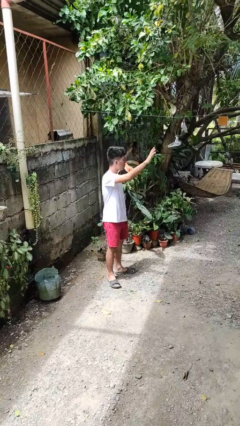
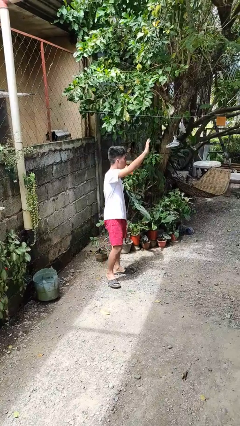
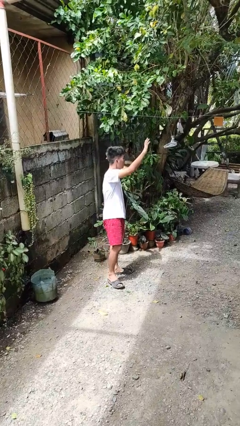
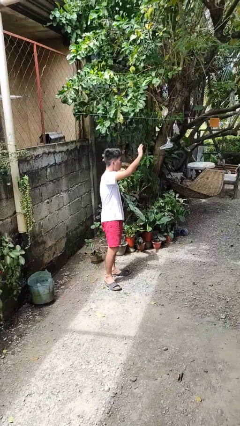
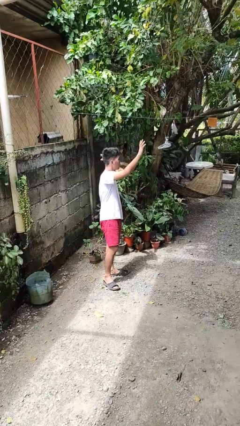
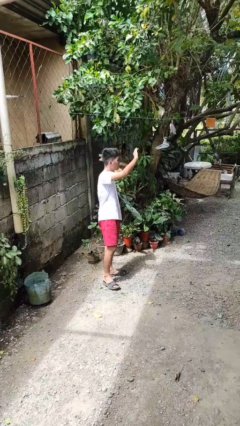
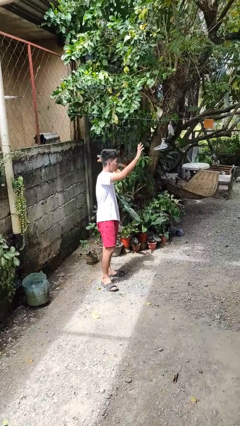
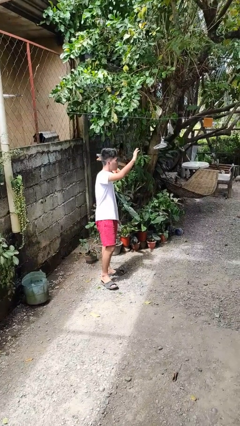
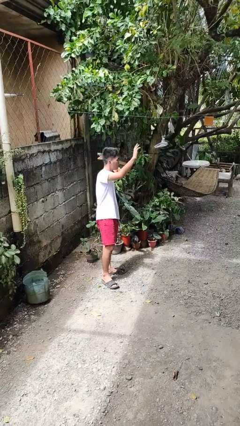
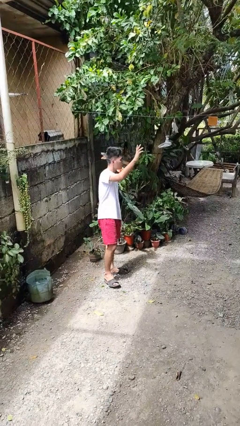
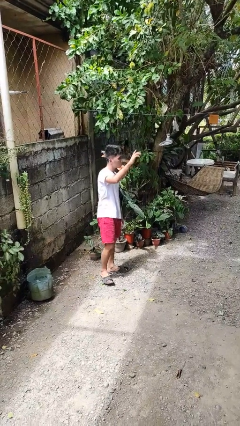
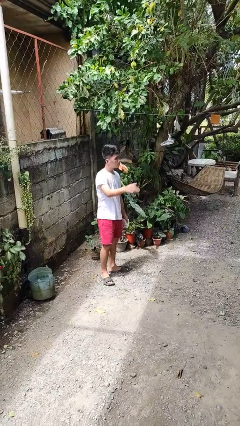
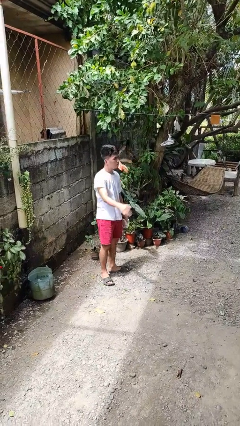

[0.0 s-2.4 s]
person waves at person

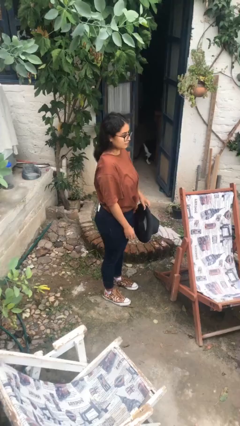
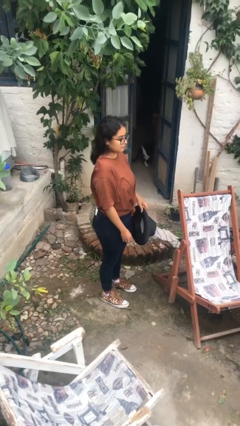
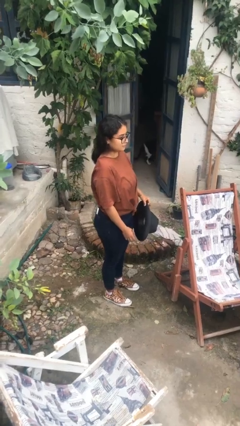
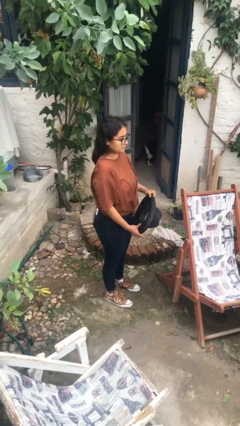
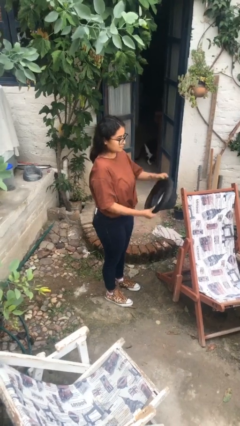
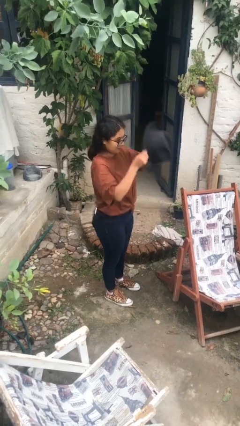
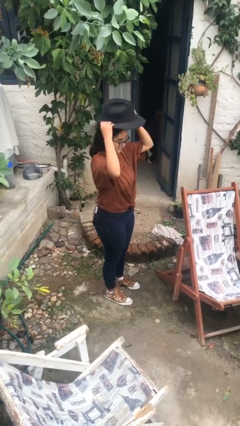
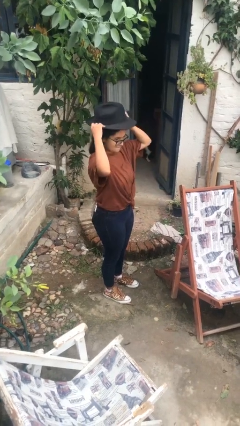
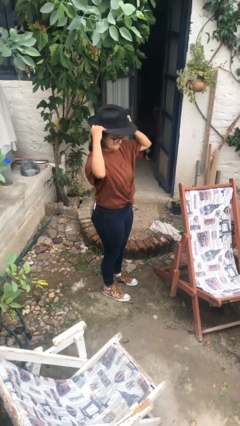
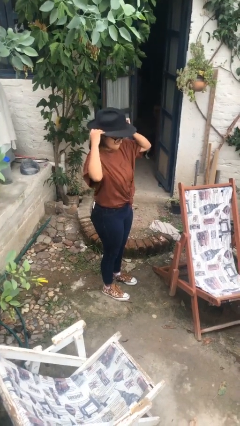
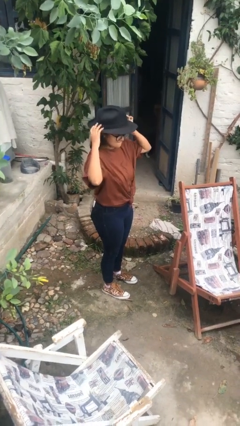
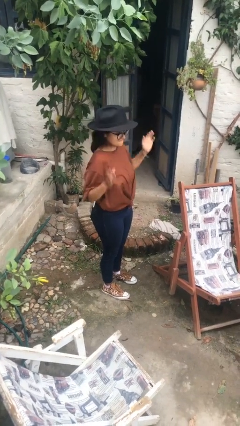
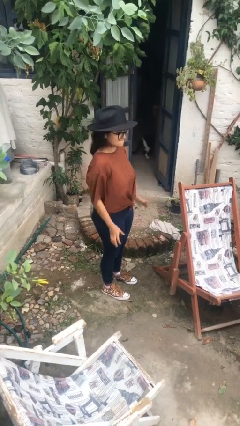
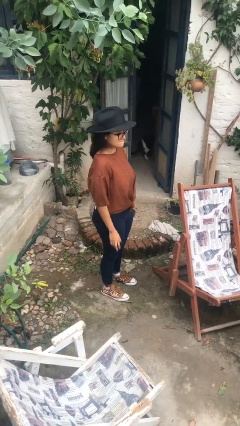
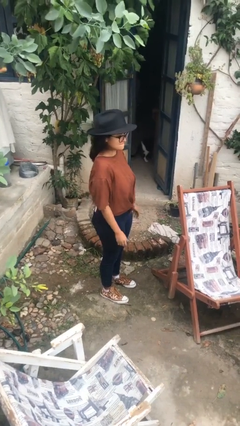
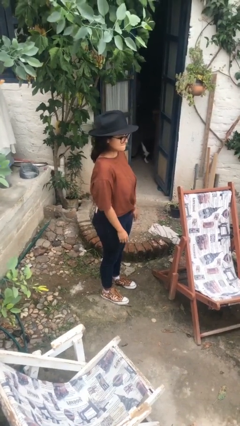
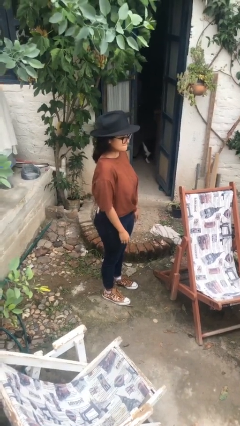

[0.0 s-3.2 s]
person puts on hat

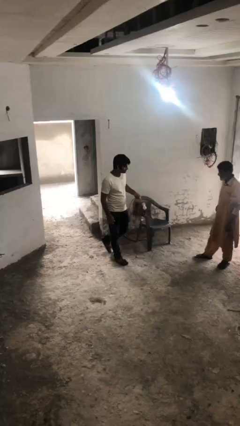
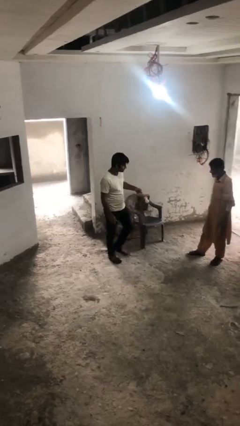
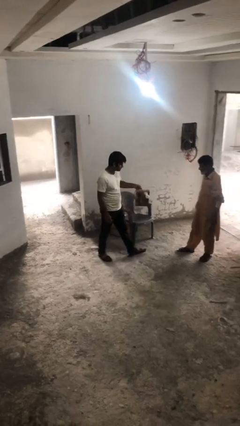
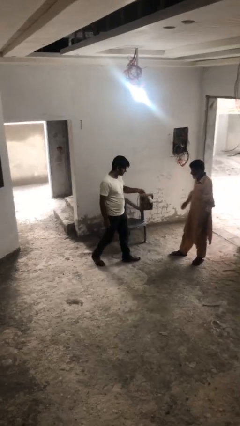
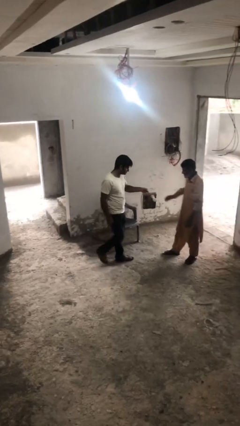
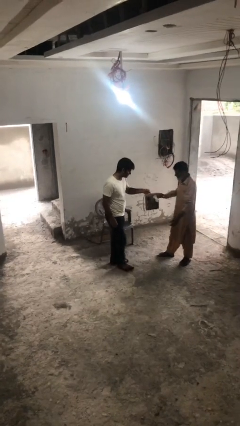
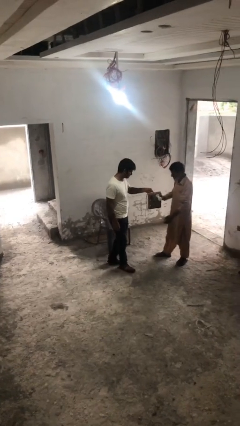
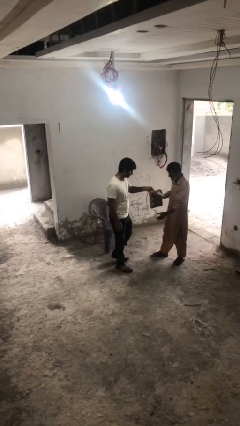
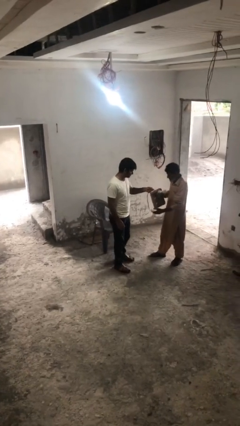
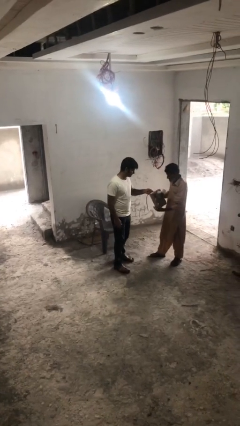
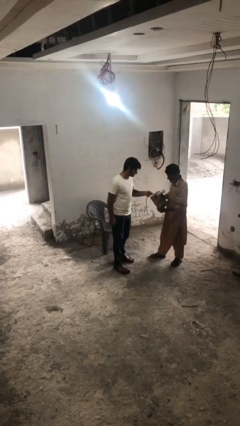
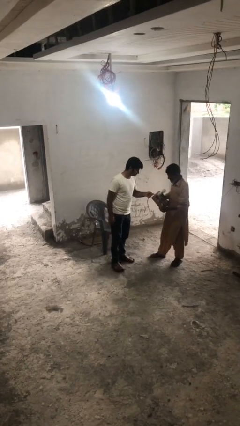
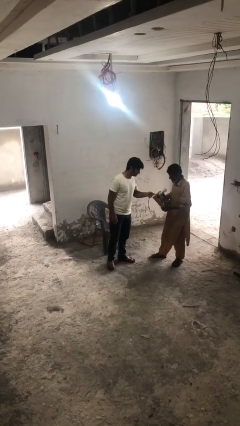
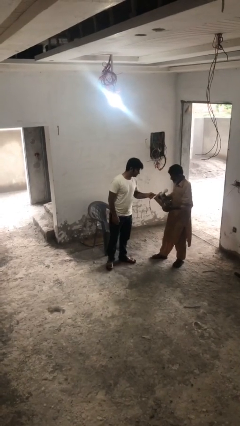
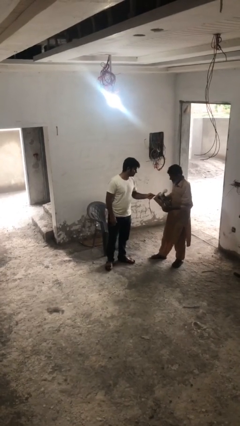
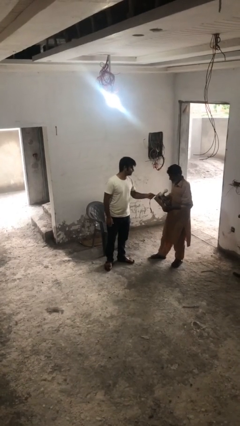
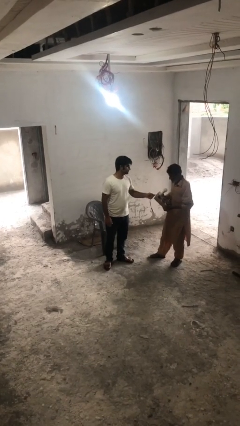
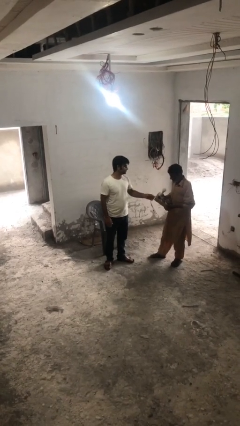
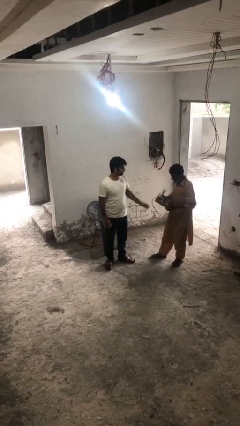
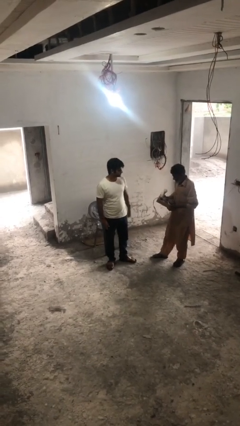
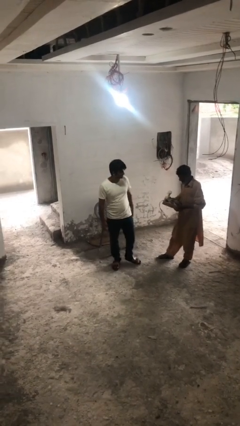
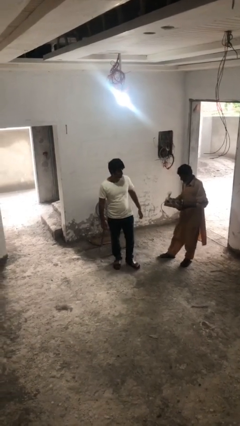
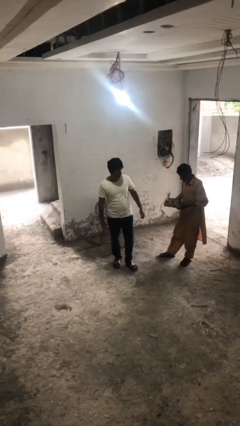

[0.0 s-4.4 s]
person transfers object to person

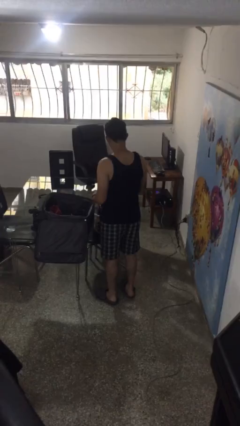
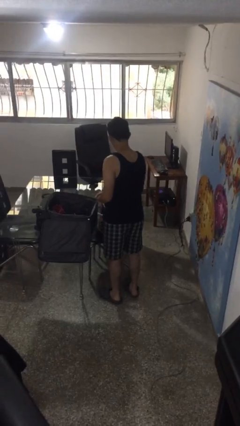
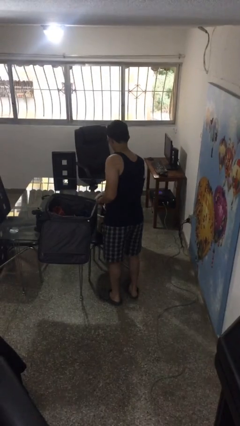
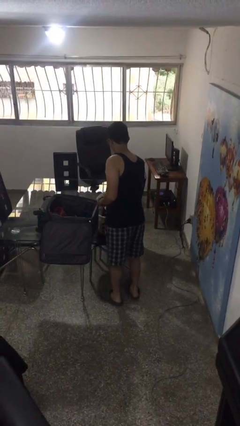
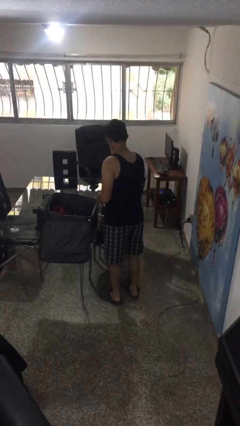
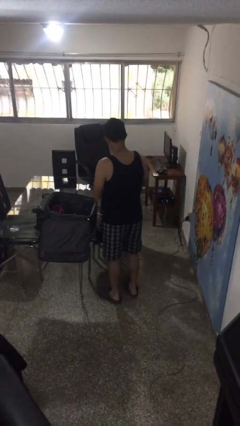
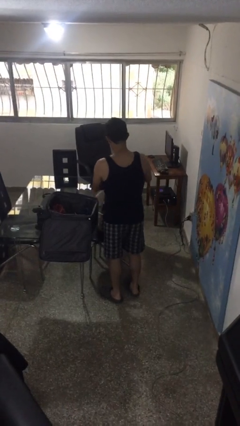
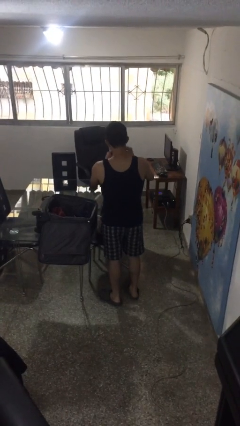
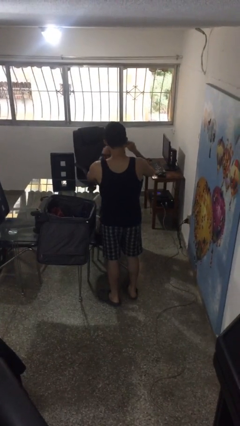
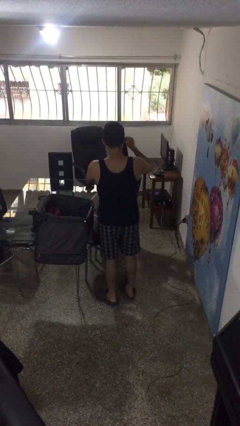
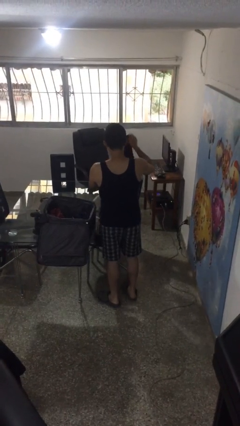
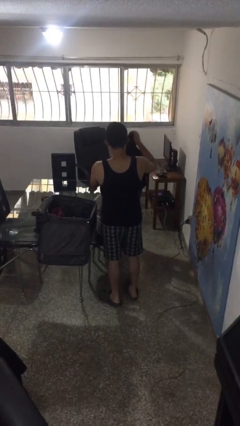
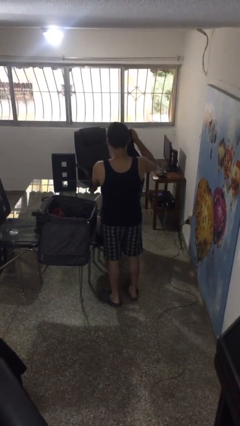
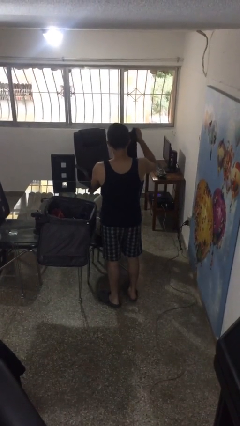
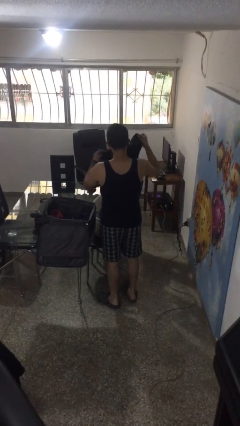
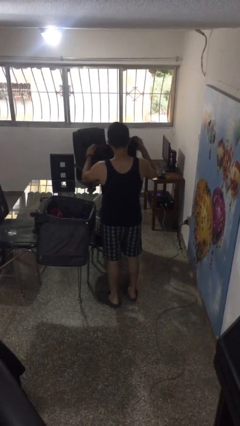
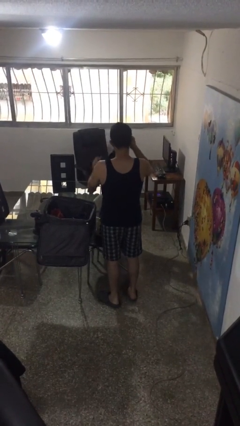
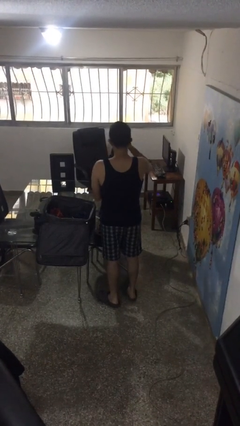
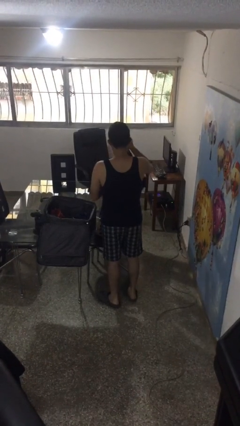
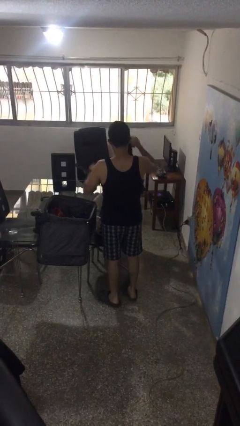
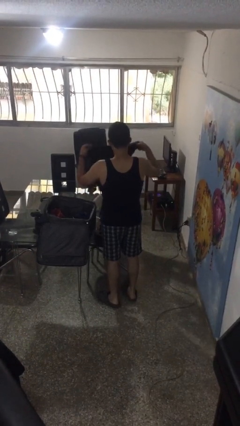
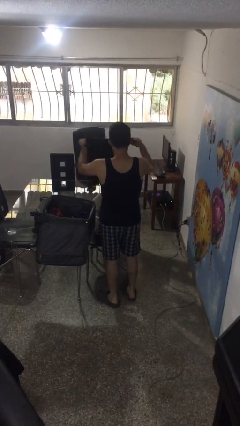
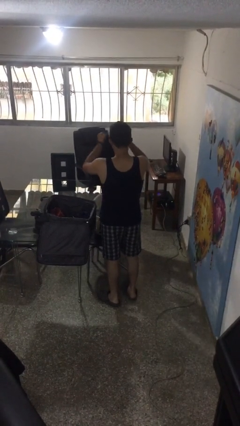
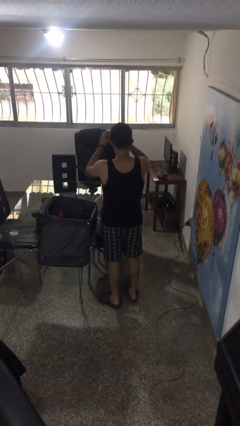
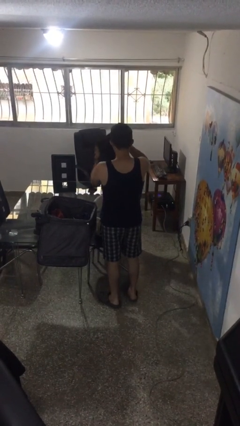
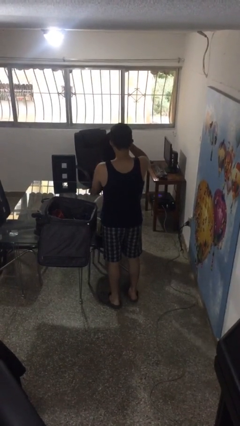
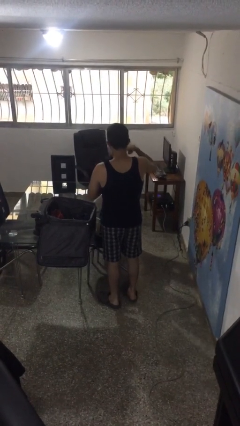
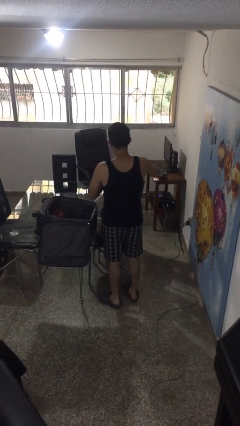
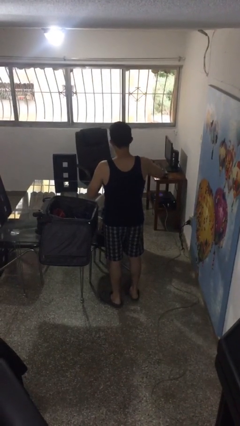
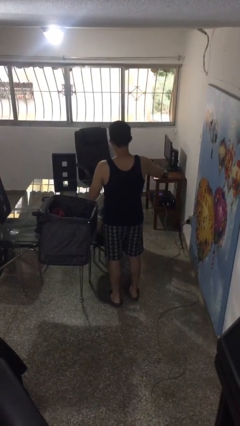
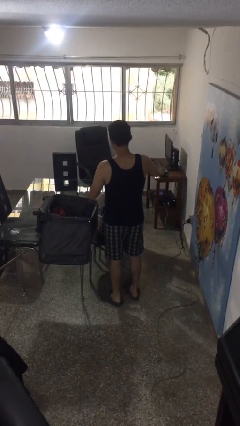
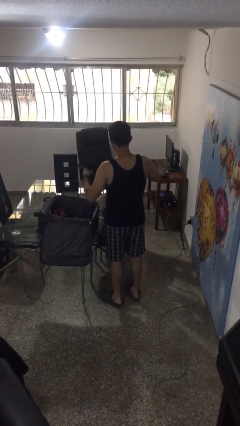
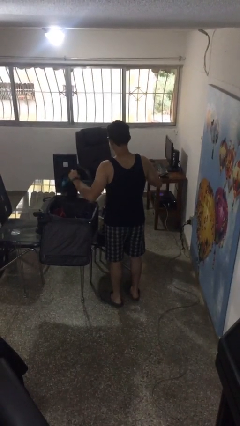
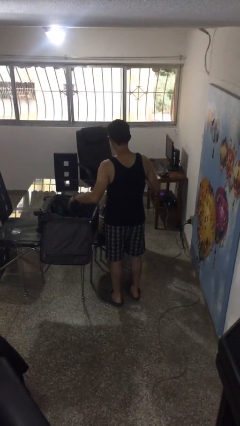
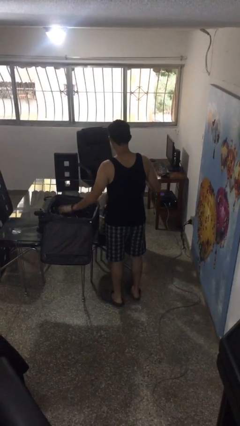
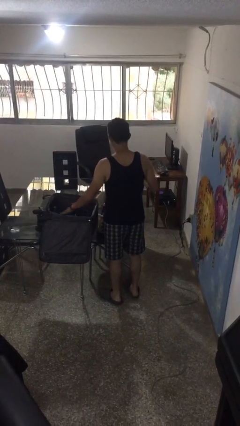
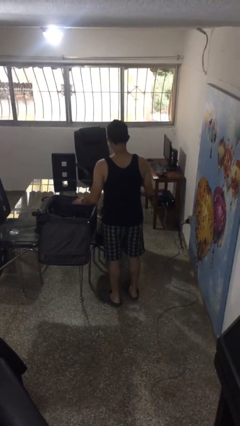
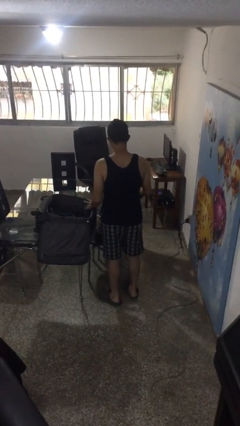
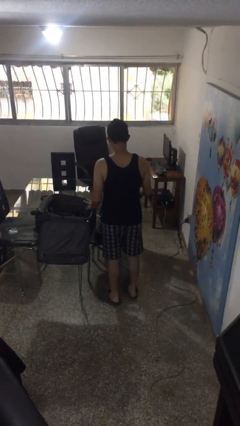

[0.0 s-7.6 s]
person loads clothes into suitcase

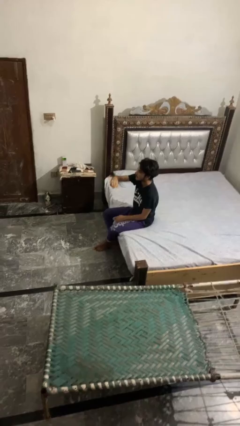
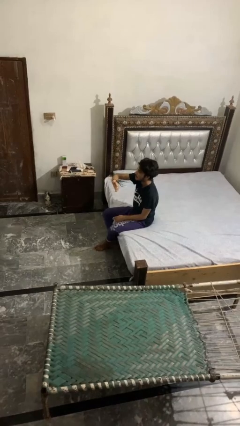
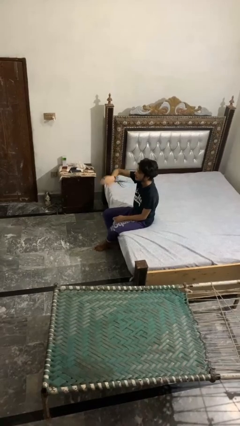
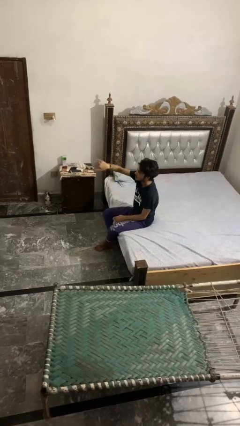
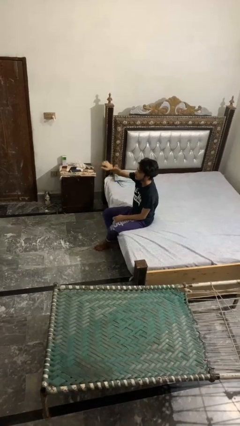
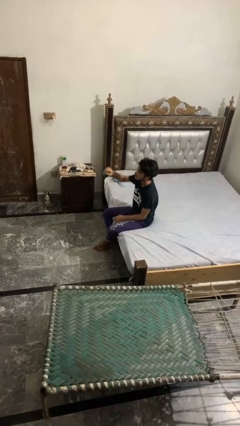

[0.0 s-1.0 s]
person gestures swipe right
